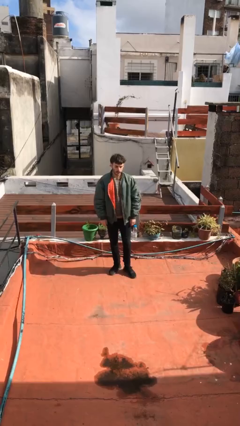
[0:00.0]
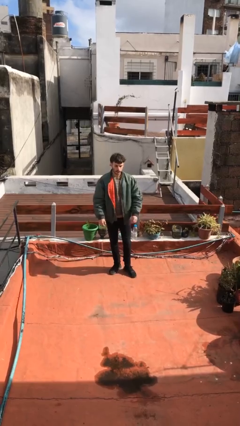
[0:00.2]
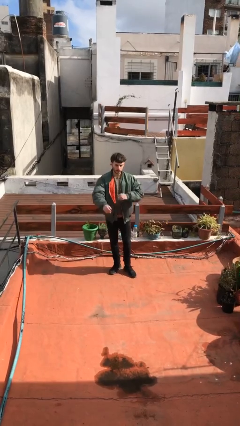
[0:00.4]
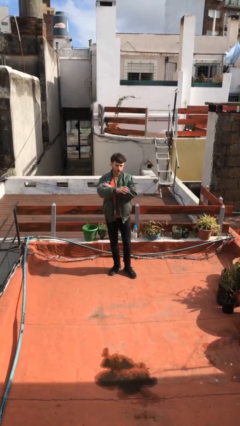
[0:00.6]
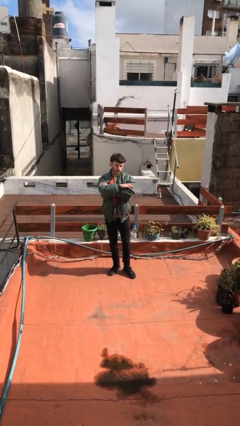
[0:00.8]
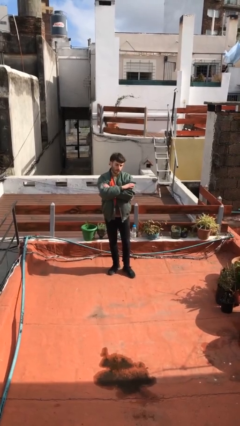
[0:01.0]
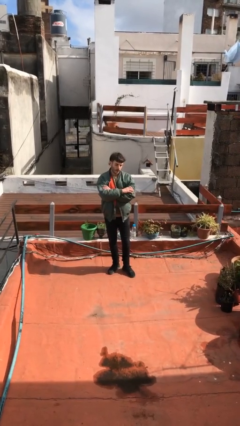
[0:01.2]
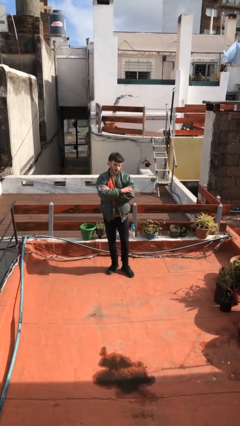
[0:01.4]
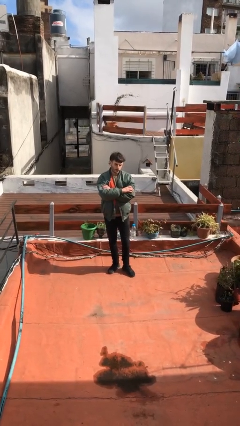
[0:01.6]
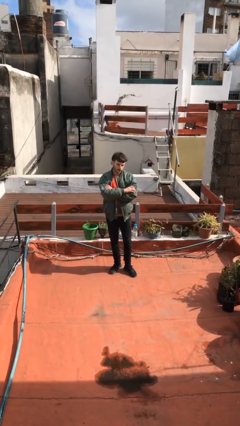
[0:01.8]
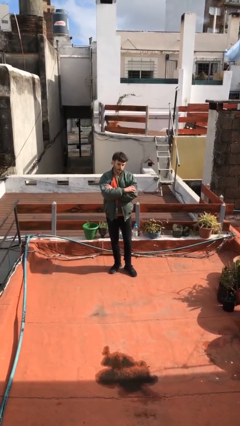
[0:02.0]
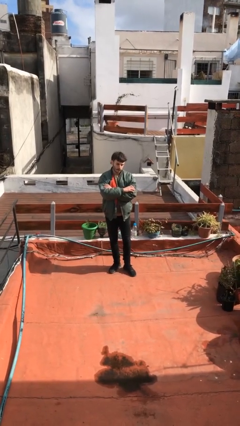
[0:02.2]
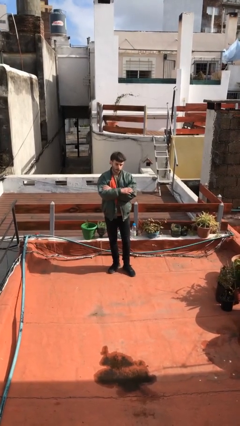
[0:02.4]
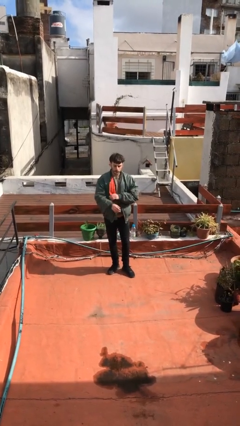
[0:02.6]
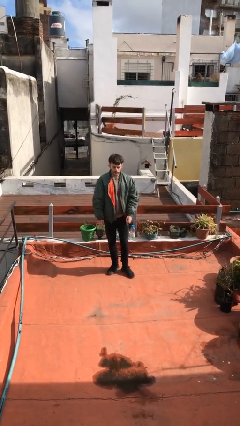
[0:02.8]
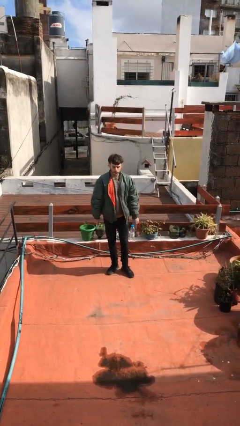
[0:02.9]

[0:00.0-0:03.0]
person crosses arms

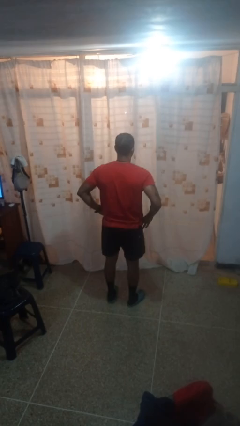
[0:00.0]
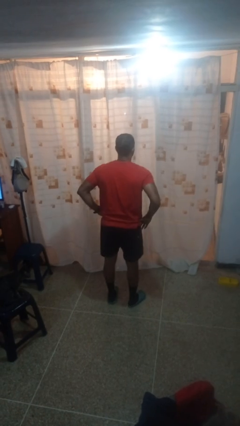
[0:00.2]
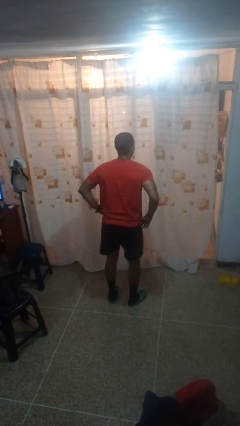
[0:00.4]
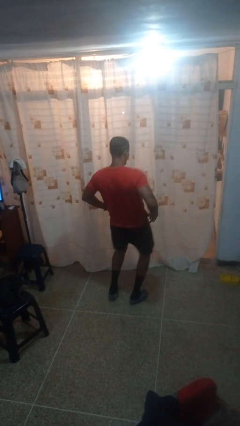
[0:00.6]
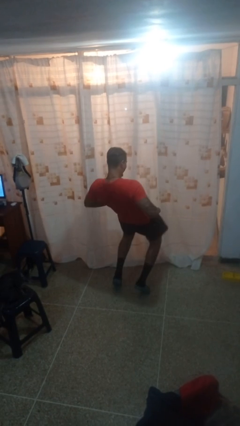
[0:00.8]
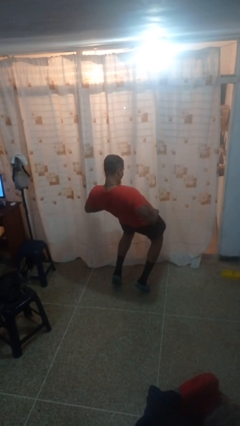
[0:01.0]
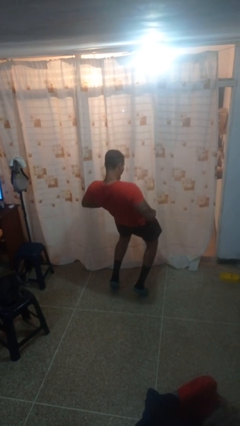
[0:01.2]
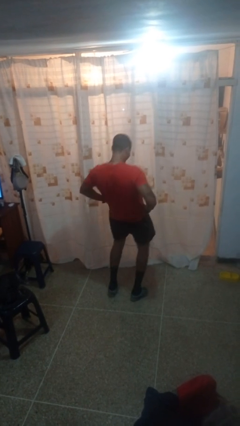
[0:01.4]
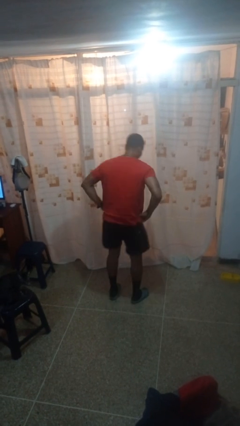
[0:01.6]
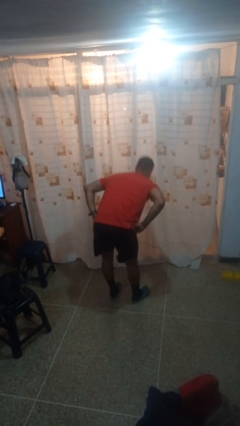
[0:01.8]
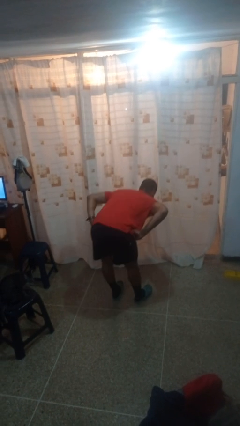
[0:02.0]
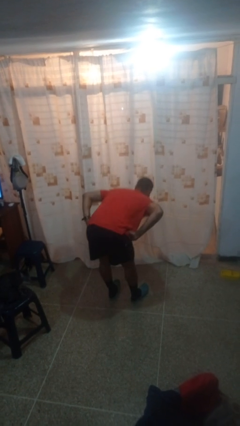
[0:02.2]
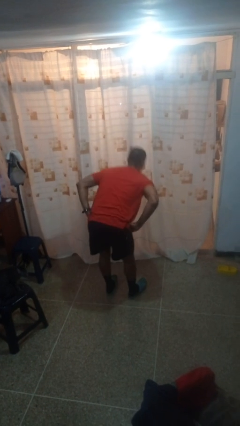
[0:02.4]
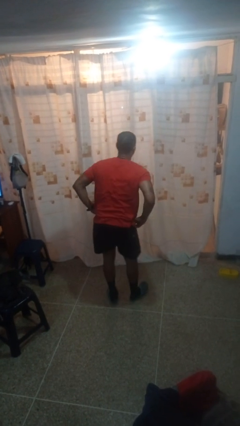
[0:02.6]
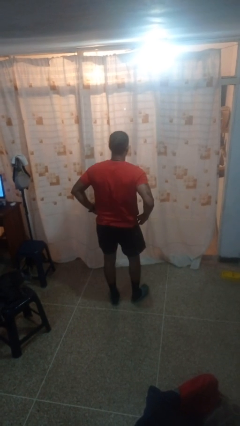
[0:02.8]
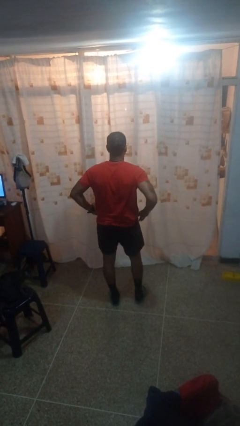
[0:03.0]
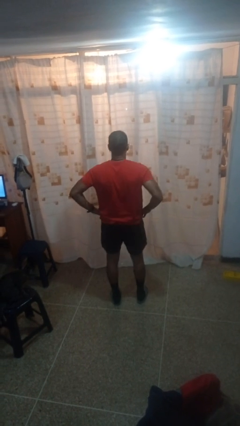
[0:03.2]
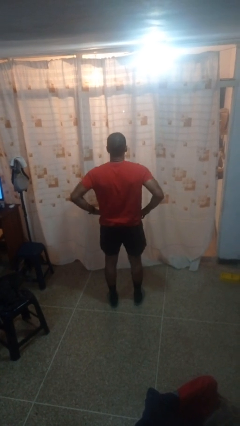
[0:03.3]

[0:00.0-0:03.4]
person wiggles hips

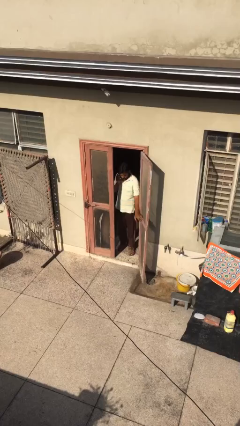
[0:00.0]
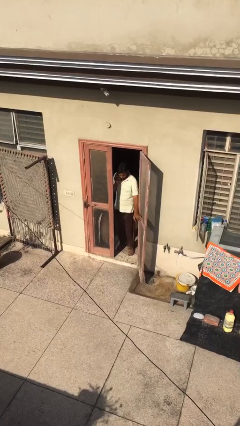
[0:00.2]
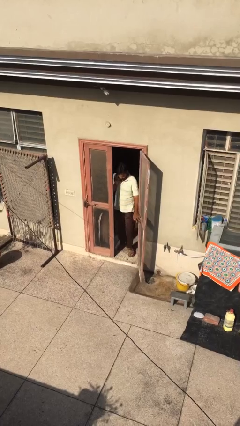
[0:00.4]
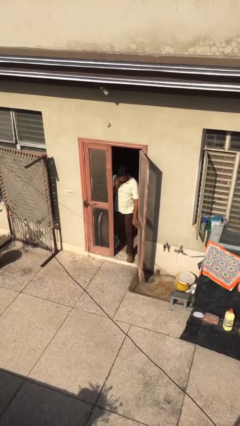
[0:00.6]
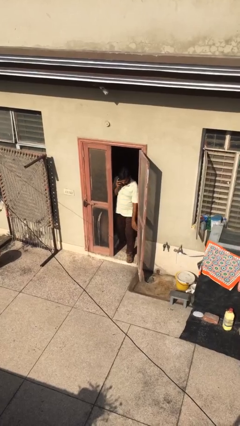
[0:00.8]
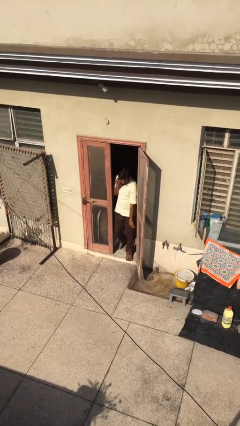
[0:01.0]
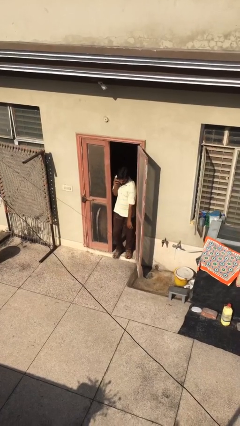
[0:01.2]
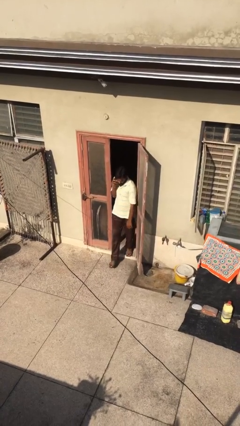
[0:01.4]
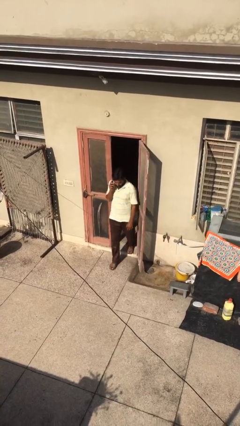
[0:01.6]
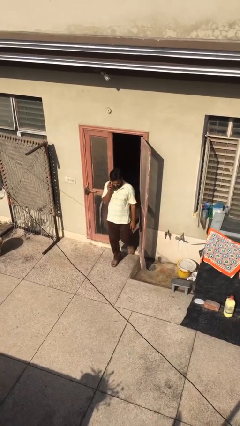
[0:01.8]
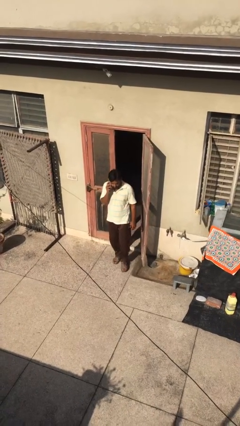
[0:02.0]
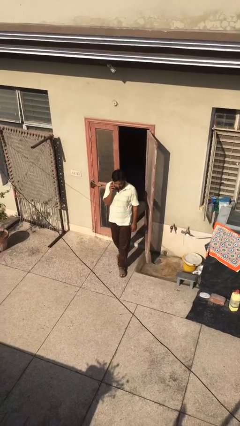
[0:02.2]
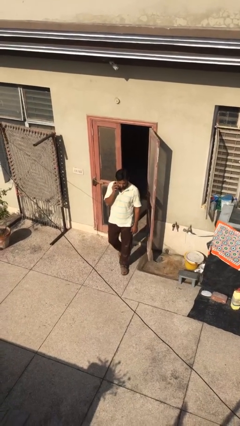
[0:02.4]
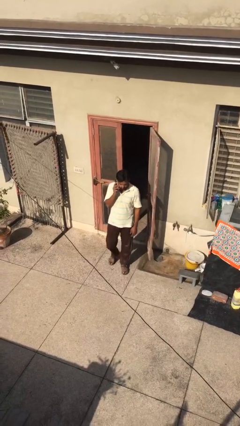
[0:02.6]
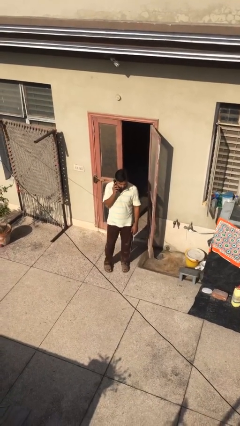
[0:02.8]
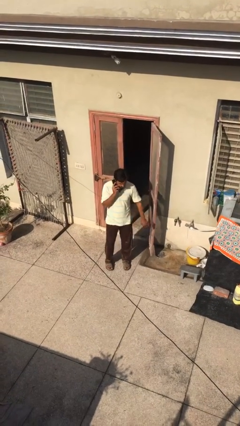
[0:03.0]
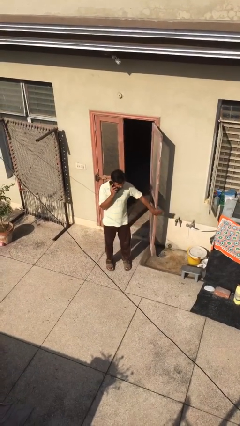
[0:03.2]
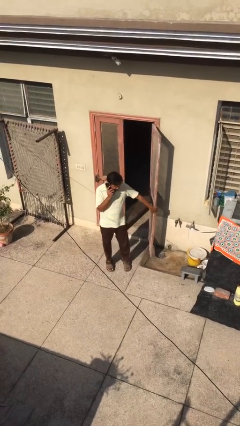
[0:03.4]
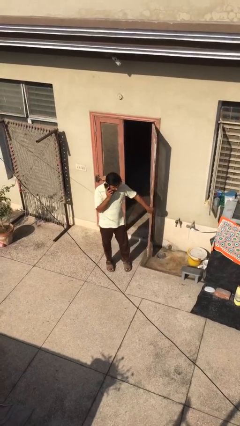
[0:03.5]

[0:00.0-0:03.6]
person enters scene through structure

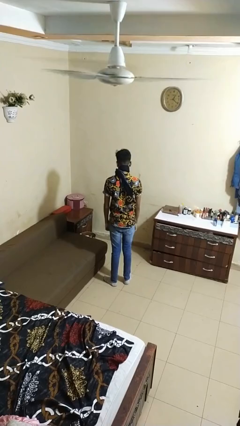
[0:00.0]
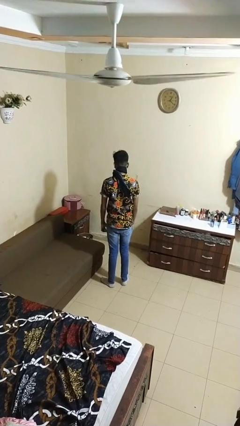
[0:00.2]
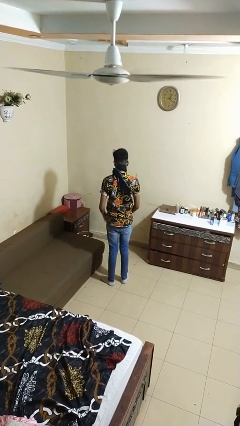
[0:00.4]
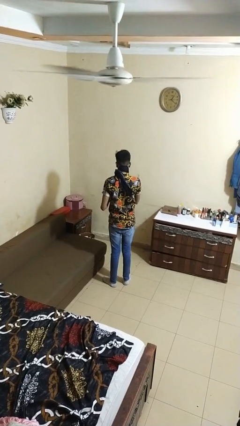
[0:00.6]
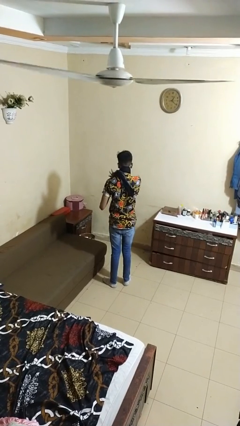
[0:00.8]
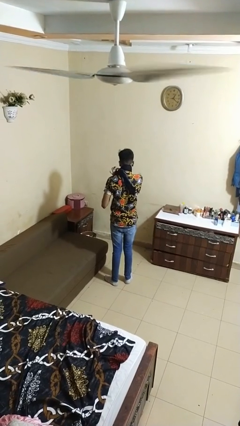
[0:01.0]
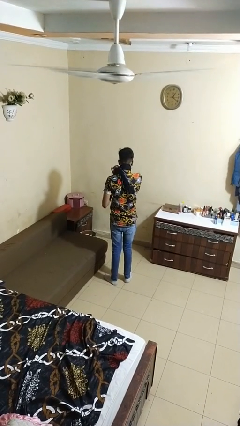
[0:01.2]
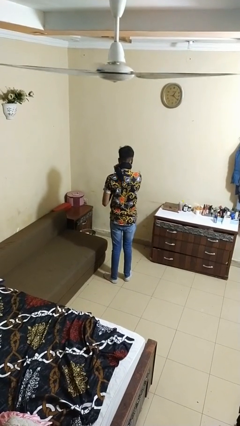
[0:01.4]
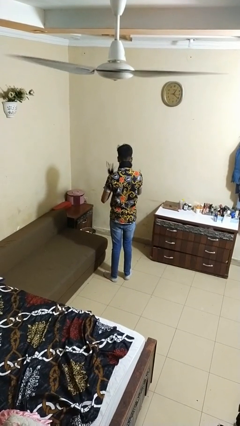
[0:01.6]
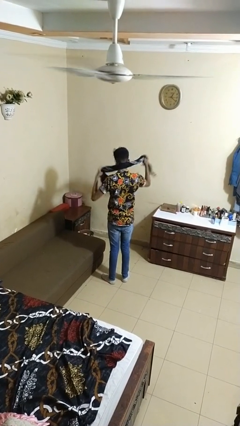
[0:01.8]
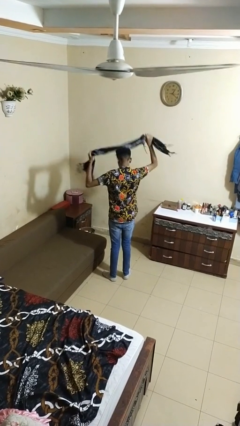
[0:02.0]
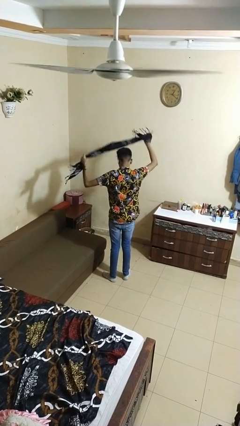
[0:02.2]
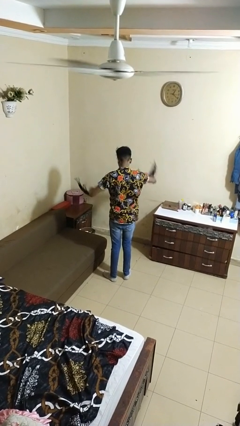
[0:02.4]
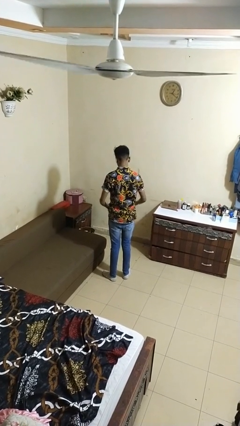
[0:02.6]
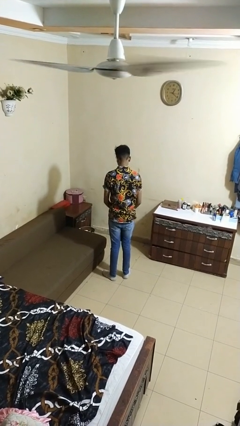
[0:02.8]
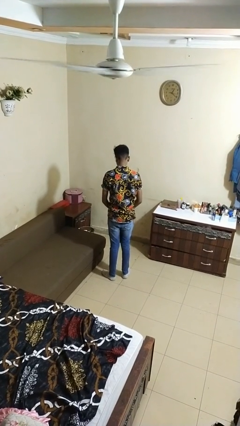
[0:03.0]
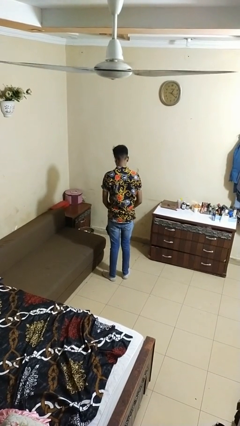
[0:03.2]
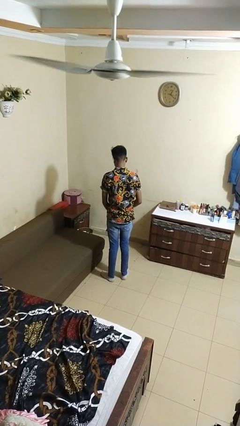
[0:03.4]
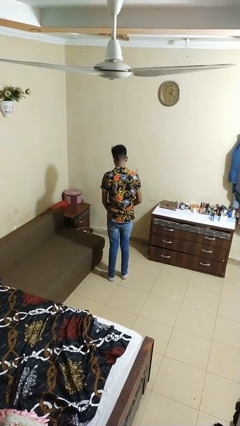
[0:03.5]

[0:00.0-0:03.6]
person takes off scarf

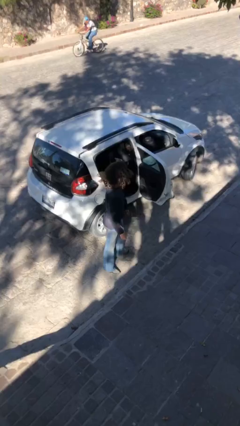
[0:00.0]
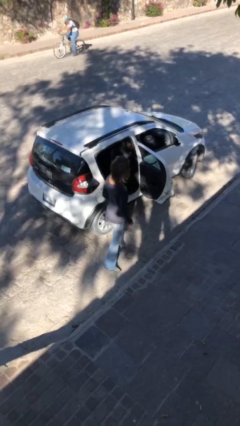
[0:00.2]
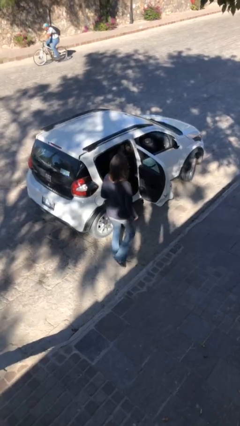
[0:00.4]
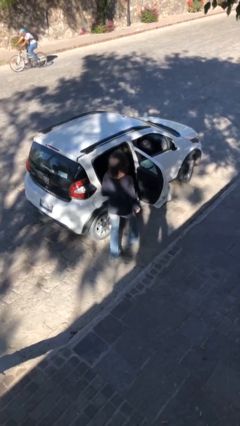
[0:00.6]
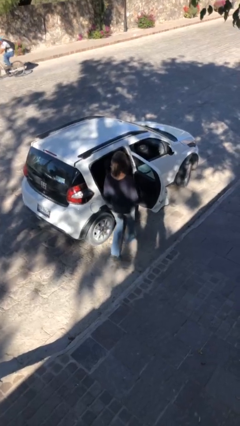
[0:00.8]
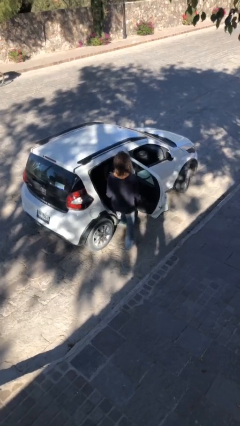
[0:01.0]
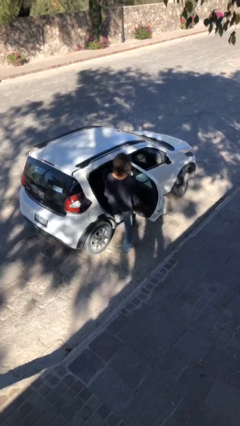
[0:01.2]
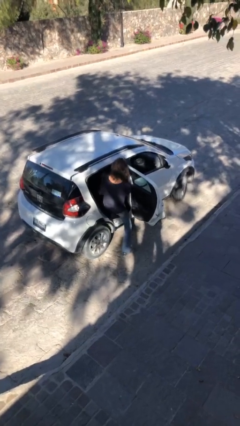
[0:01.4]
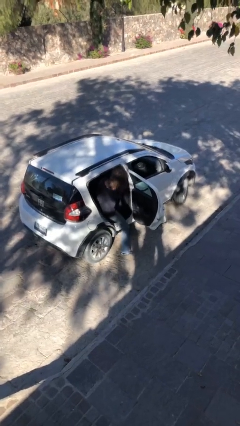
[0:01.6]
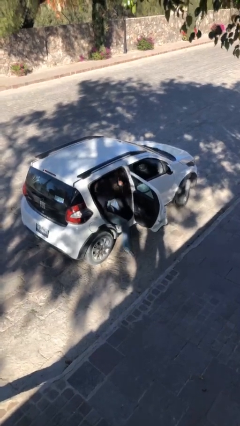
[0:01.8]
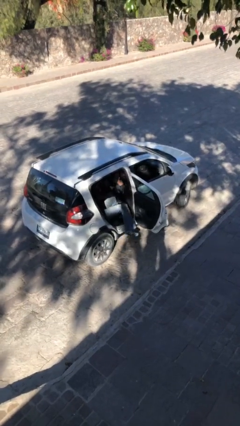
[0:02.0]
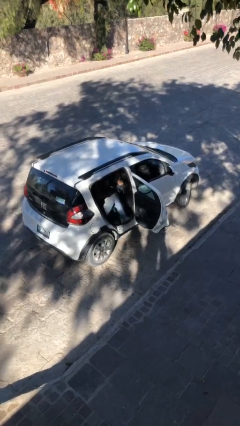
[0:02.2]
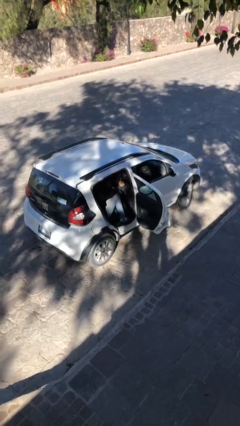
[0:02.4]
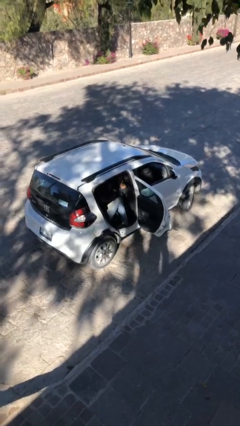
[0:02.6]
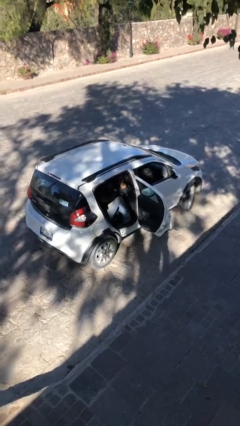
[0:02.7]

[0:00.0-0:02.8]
person enters car

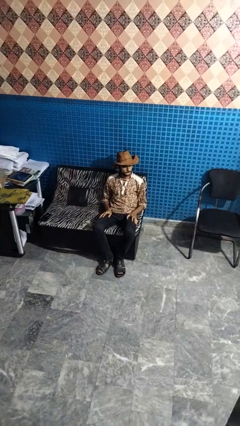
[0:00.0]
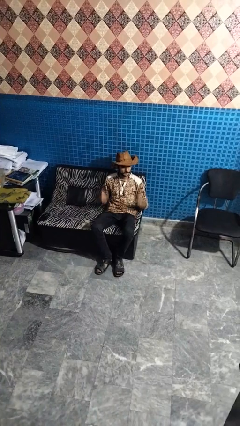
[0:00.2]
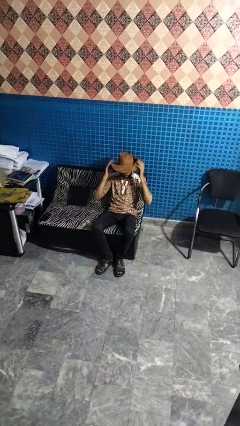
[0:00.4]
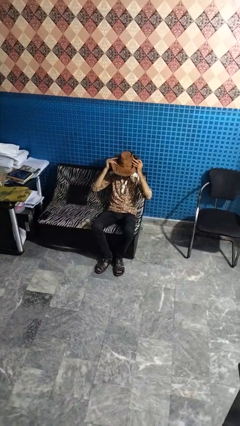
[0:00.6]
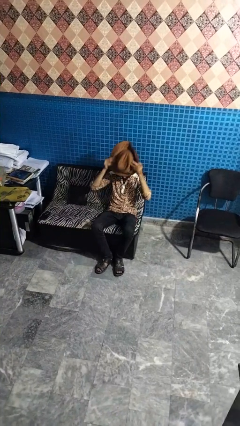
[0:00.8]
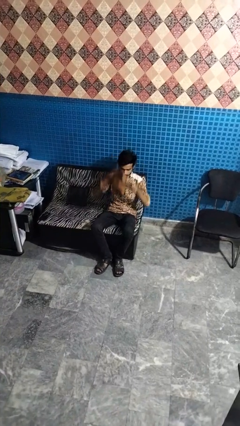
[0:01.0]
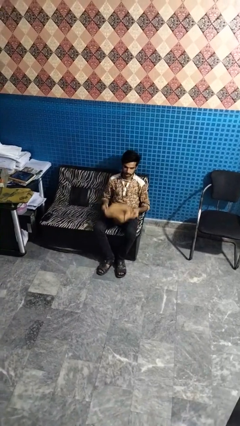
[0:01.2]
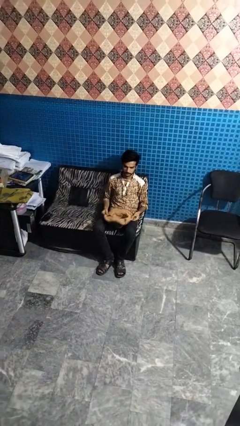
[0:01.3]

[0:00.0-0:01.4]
person takes off hat
